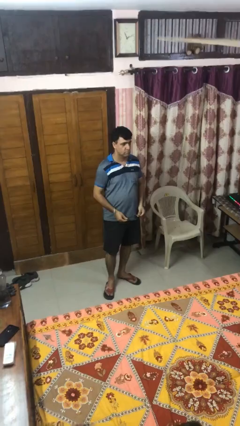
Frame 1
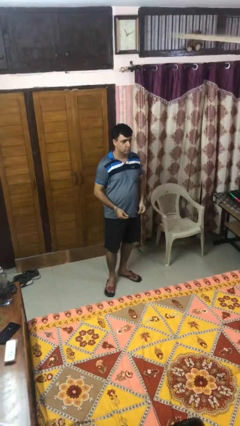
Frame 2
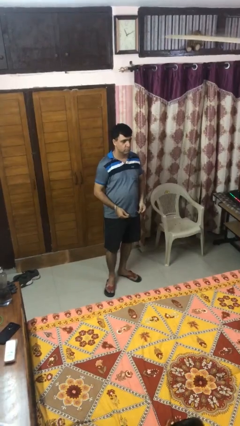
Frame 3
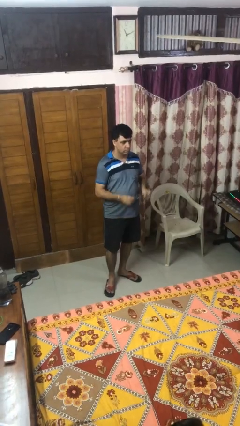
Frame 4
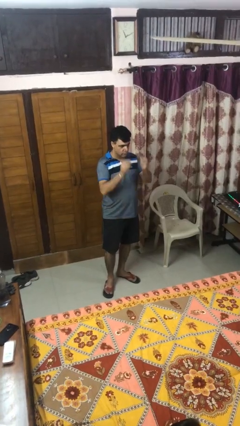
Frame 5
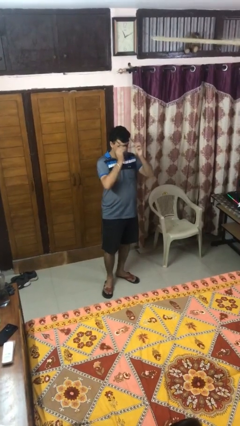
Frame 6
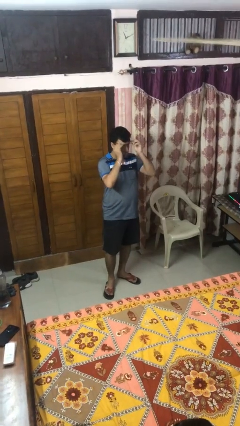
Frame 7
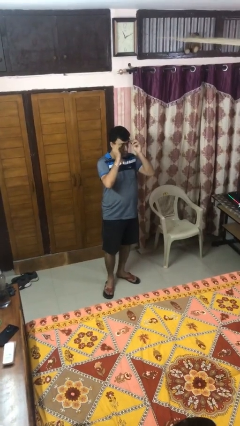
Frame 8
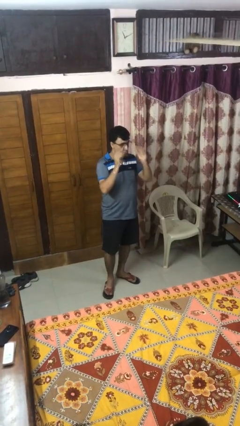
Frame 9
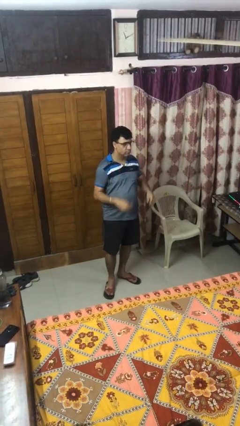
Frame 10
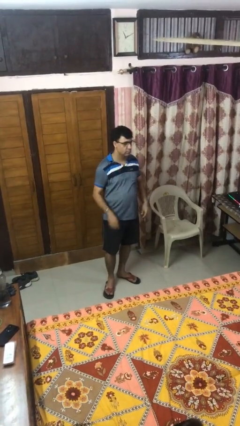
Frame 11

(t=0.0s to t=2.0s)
person puts on glasses

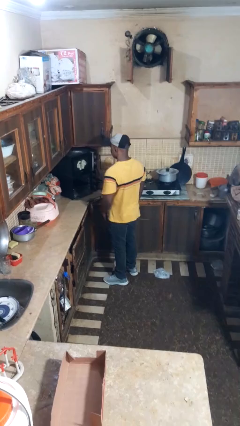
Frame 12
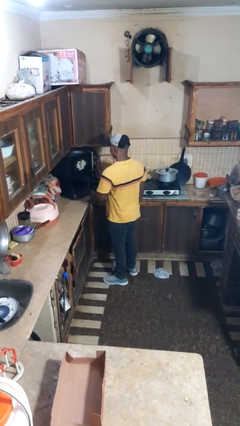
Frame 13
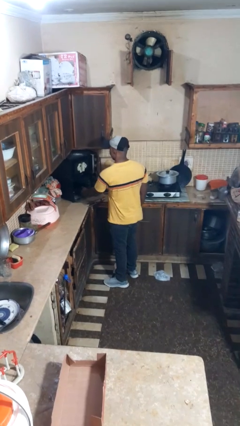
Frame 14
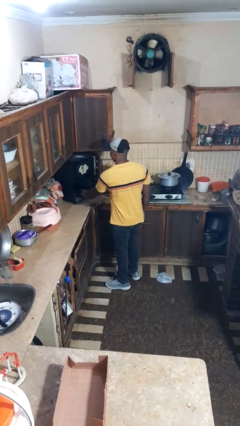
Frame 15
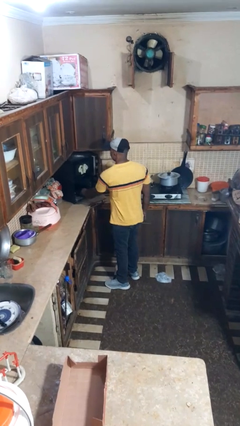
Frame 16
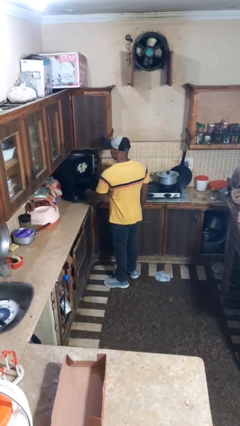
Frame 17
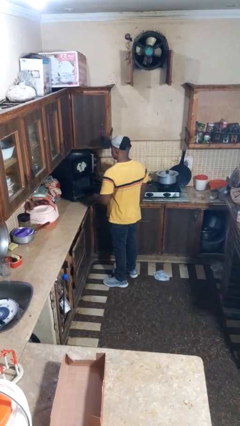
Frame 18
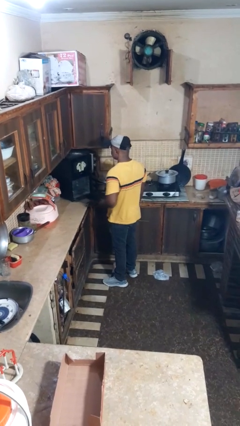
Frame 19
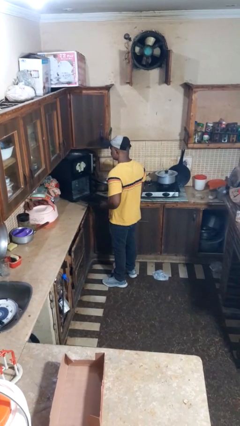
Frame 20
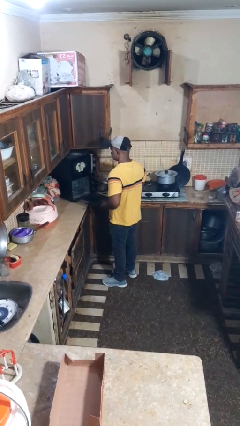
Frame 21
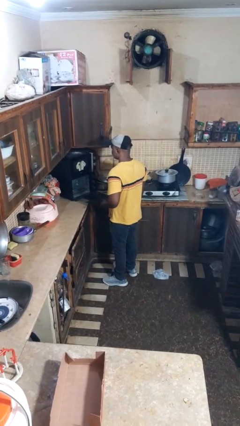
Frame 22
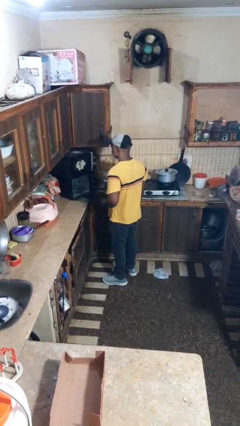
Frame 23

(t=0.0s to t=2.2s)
person takes object from oven

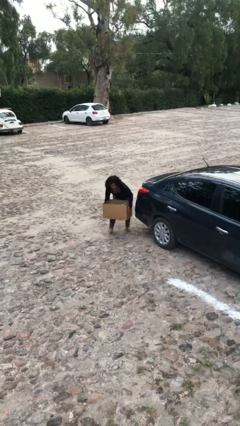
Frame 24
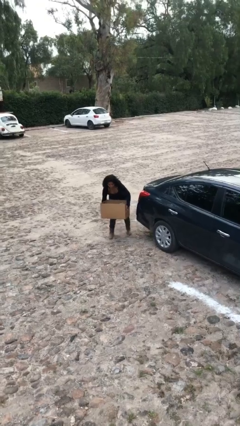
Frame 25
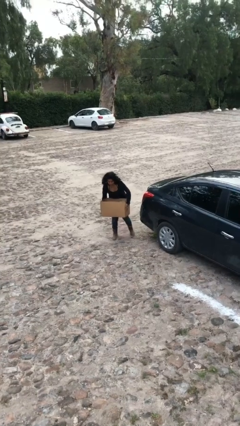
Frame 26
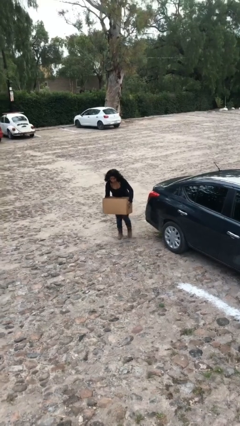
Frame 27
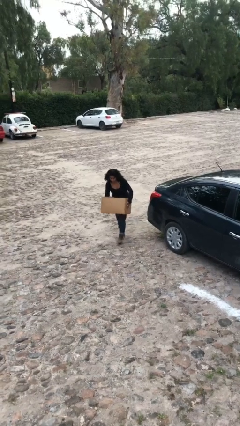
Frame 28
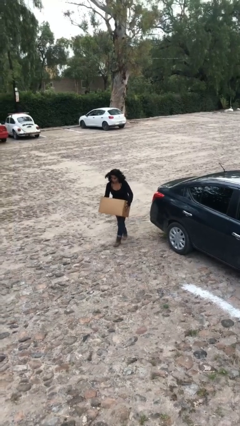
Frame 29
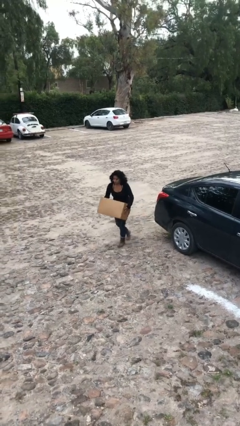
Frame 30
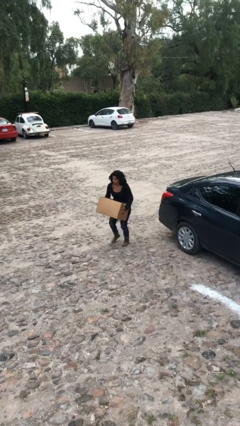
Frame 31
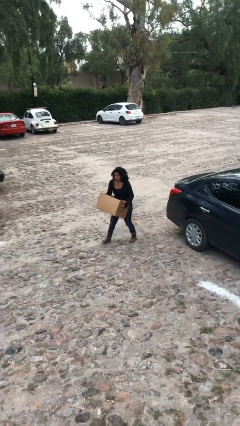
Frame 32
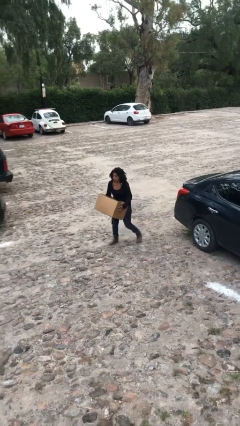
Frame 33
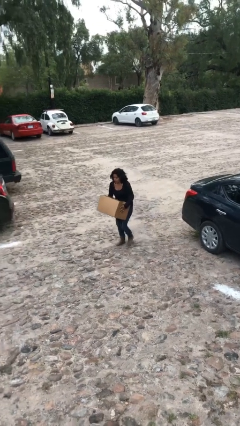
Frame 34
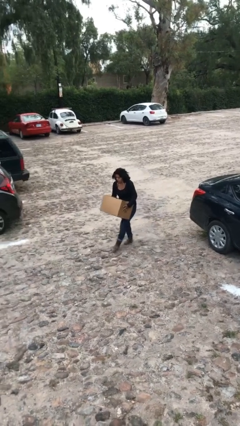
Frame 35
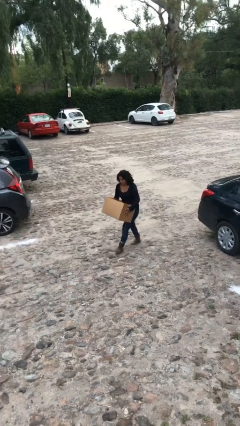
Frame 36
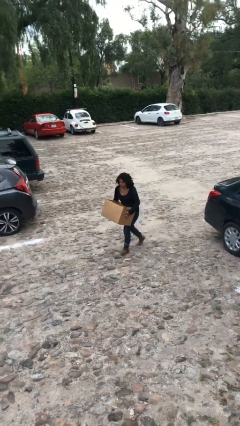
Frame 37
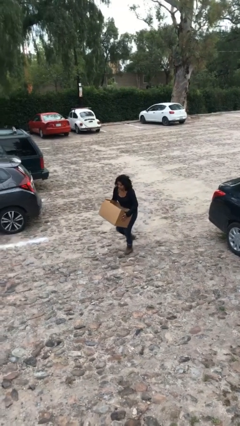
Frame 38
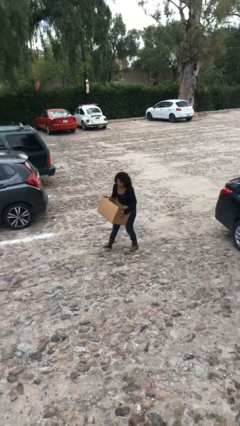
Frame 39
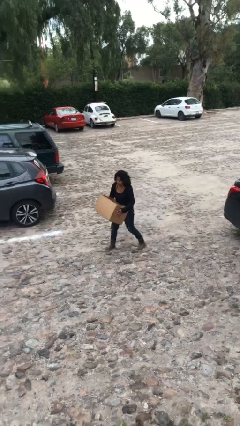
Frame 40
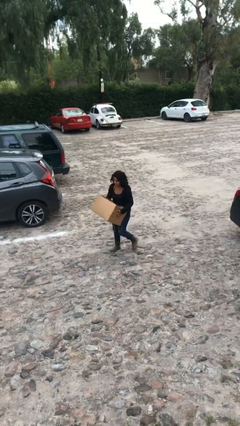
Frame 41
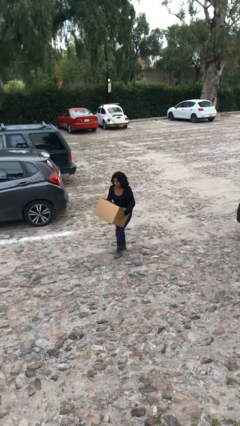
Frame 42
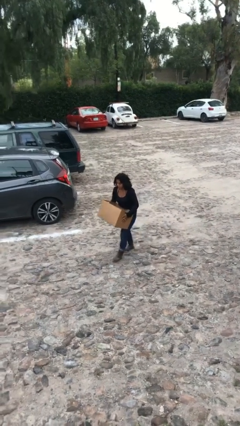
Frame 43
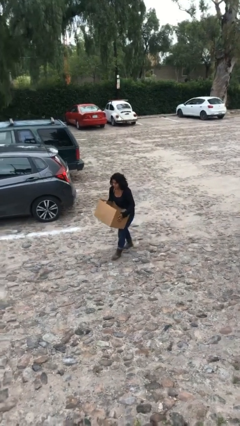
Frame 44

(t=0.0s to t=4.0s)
person carries heavy object

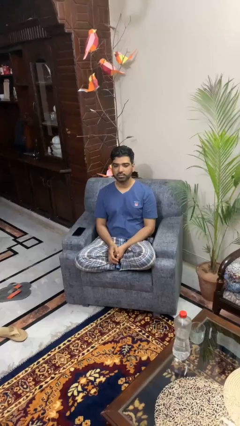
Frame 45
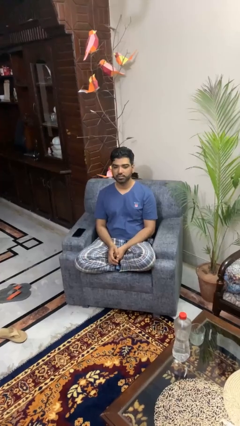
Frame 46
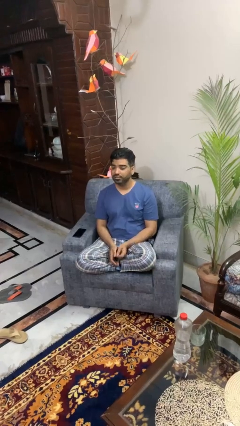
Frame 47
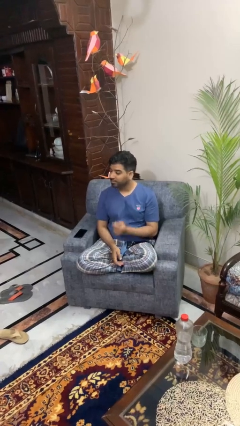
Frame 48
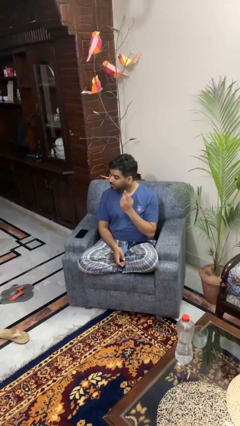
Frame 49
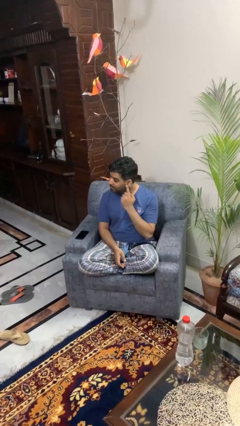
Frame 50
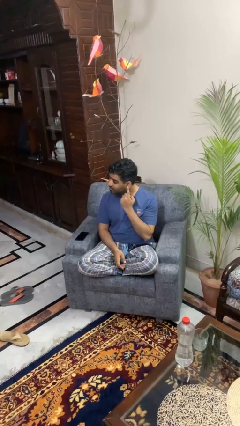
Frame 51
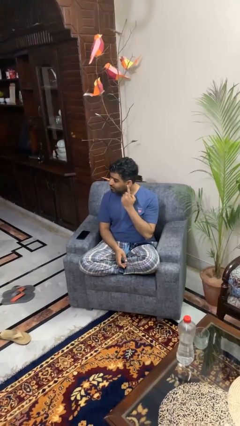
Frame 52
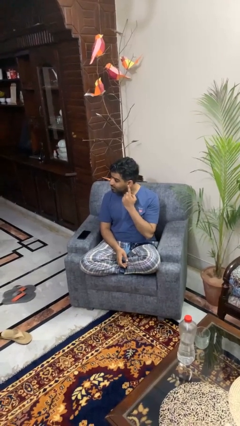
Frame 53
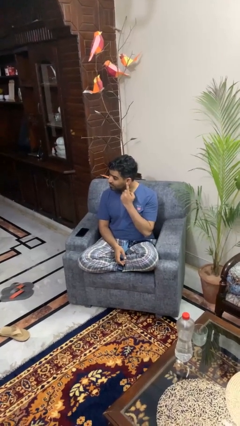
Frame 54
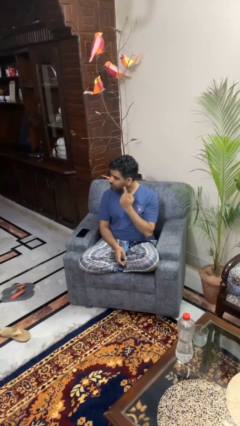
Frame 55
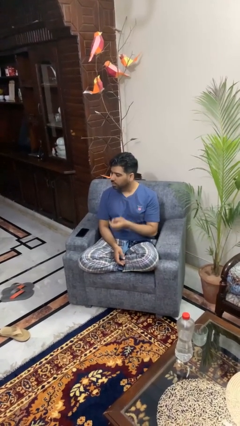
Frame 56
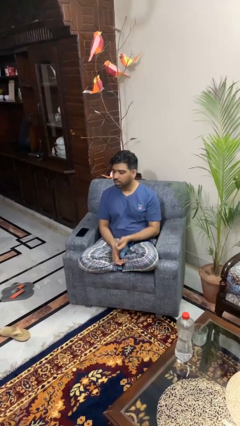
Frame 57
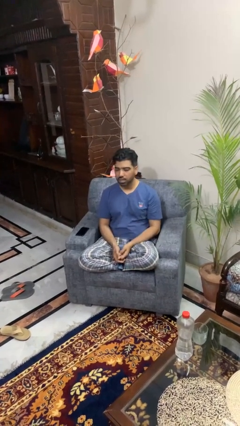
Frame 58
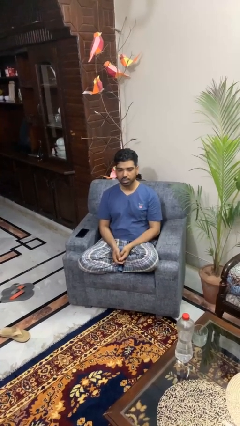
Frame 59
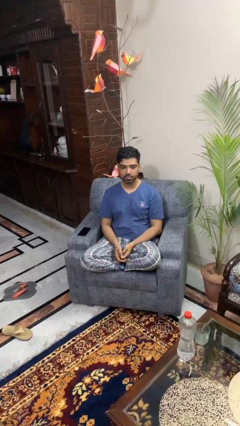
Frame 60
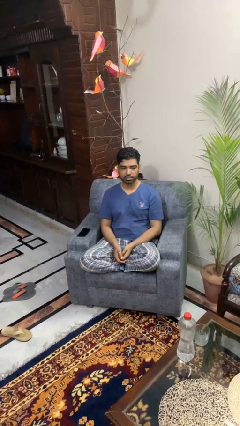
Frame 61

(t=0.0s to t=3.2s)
person gestures listen closely

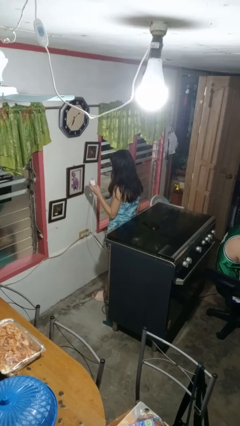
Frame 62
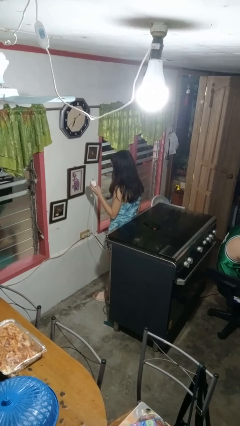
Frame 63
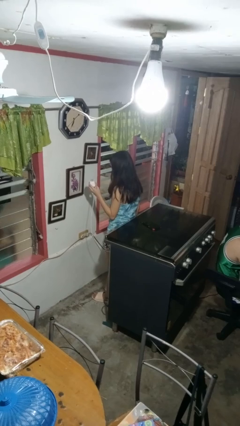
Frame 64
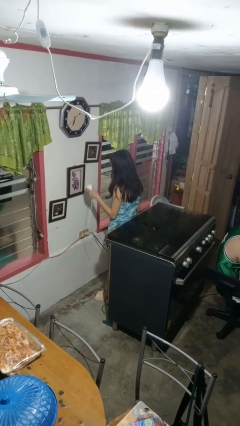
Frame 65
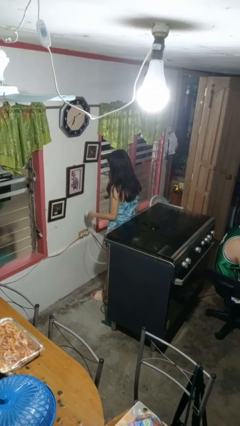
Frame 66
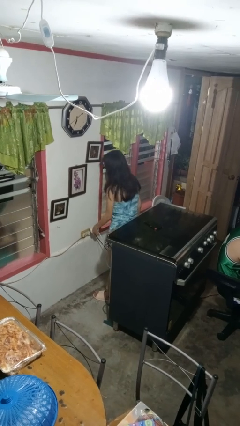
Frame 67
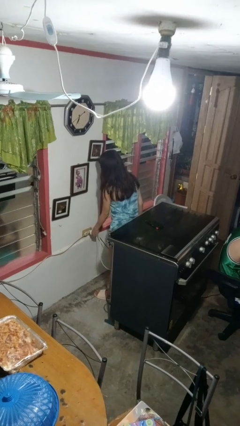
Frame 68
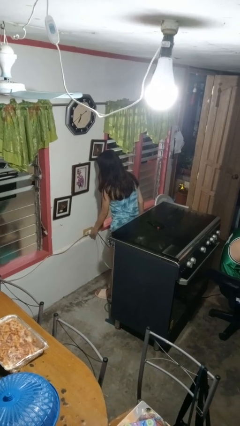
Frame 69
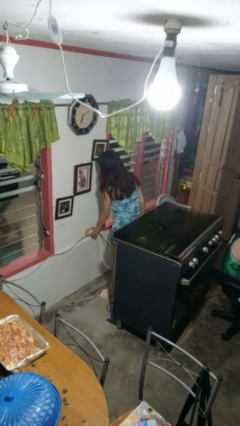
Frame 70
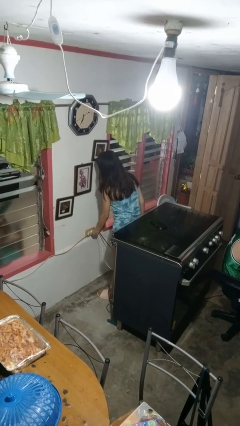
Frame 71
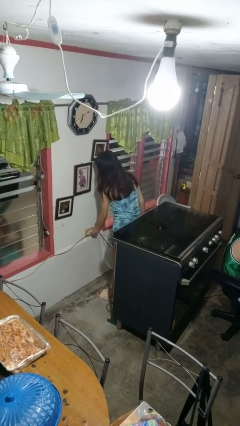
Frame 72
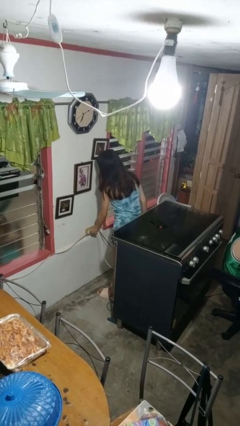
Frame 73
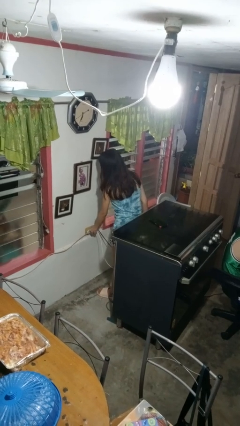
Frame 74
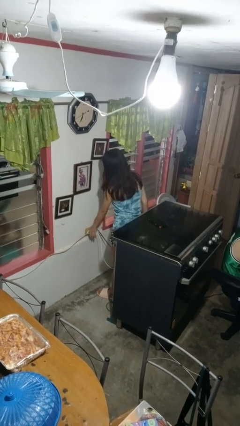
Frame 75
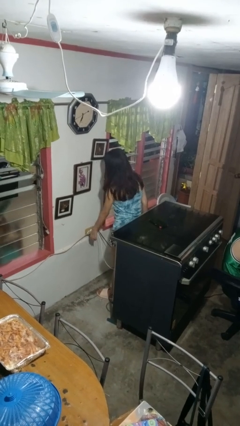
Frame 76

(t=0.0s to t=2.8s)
person plugs into electrical socket

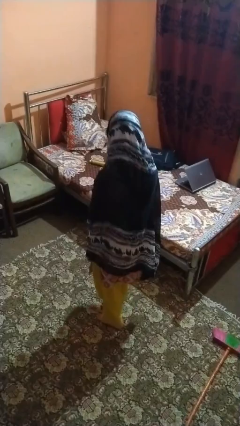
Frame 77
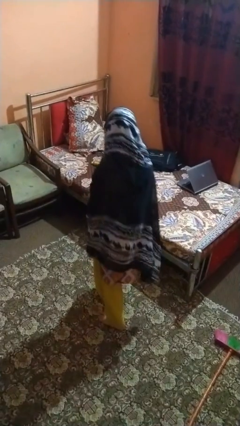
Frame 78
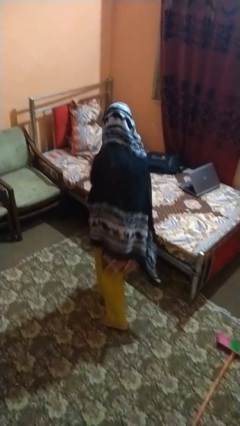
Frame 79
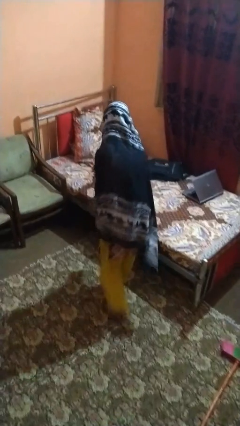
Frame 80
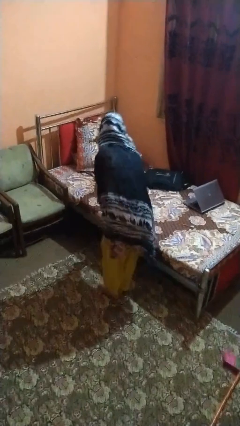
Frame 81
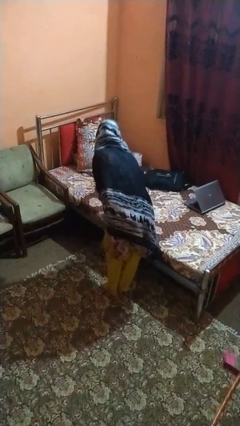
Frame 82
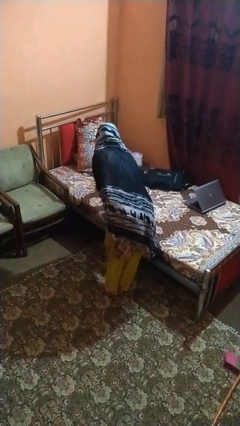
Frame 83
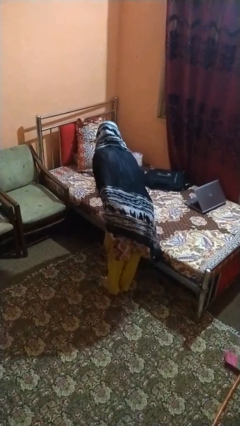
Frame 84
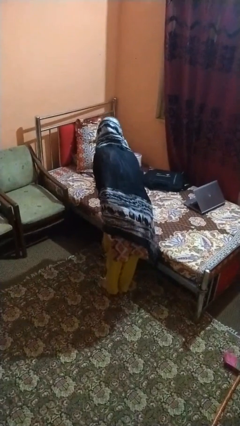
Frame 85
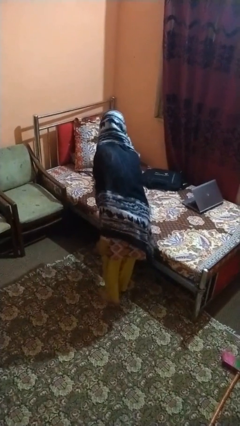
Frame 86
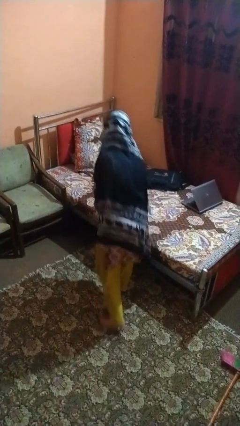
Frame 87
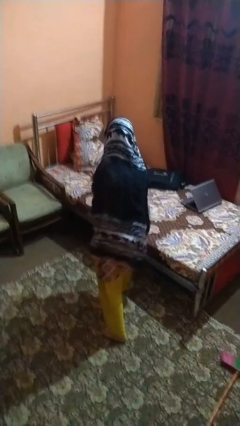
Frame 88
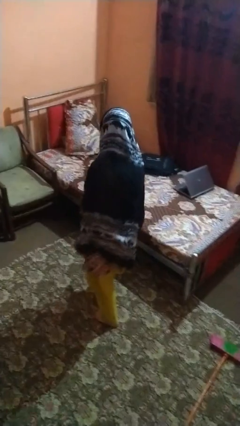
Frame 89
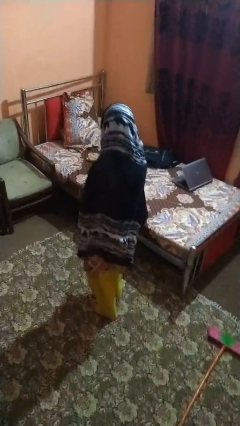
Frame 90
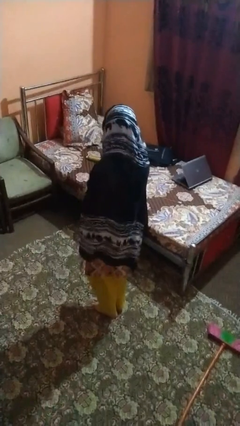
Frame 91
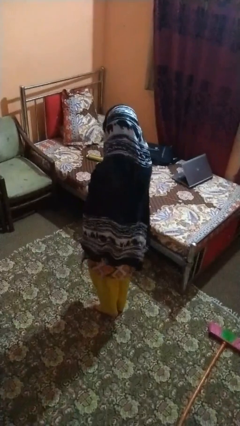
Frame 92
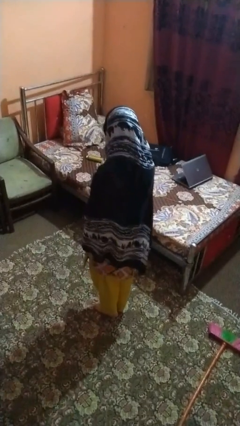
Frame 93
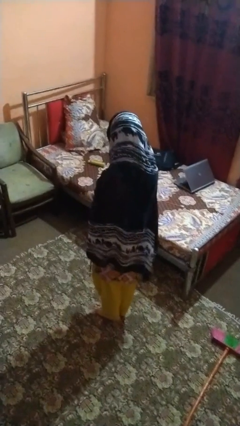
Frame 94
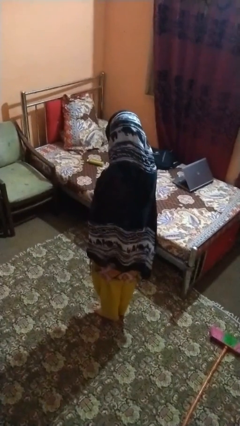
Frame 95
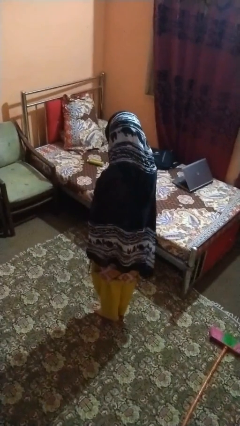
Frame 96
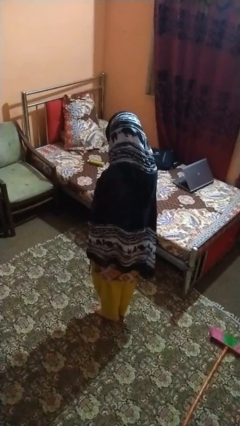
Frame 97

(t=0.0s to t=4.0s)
person picks up object from bed
